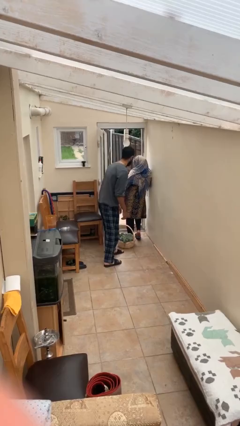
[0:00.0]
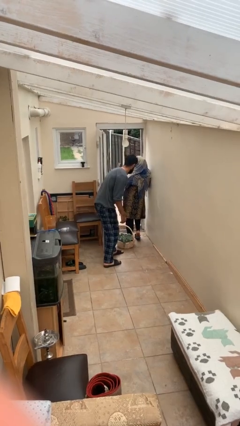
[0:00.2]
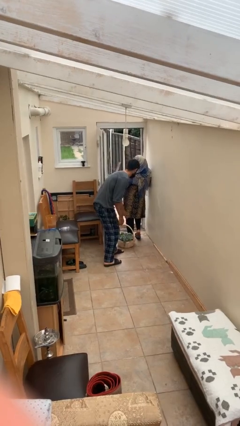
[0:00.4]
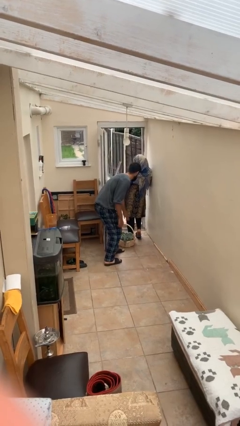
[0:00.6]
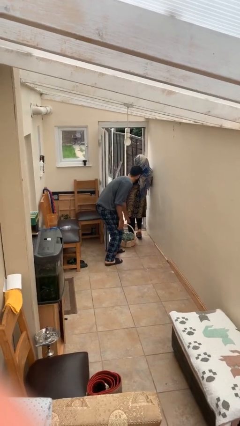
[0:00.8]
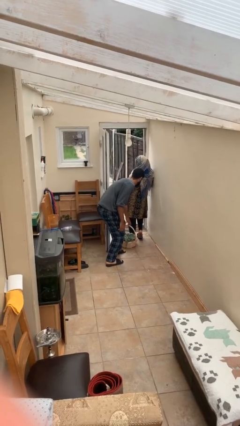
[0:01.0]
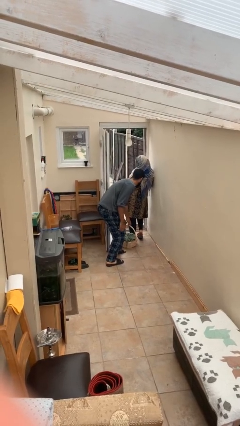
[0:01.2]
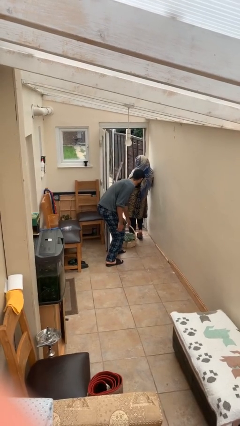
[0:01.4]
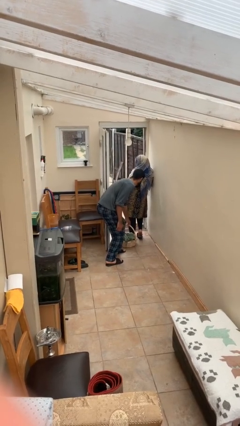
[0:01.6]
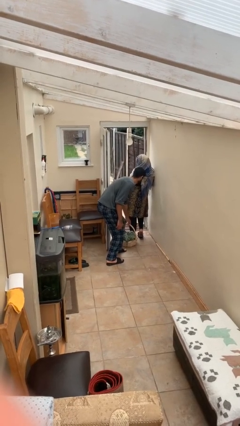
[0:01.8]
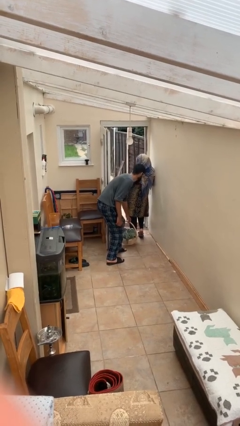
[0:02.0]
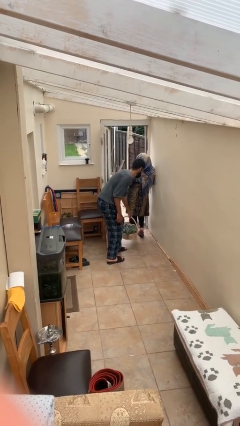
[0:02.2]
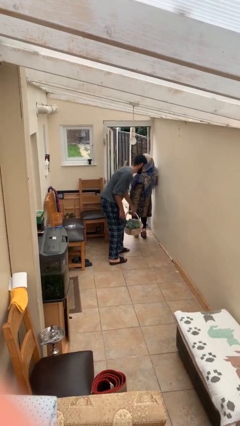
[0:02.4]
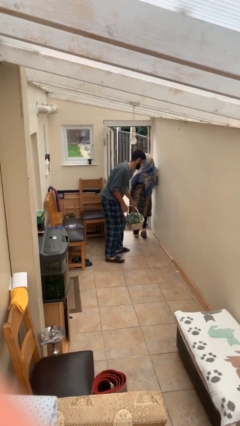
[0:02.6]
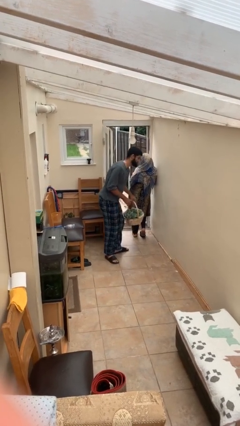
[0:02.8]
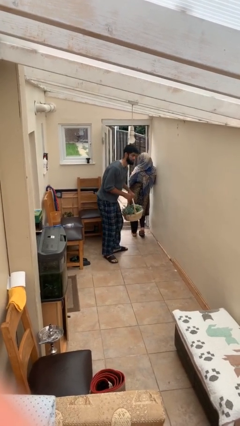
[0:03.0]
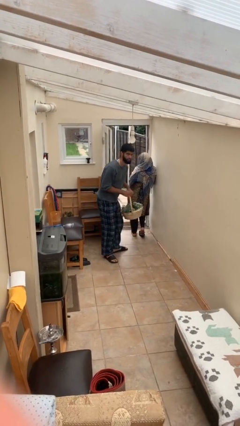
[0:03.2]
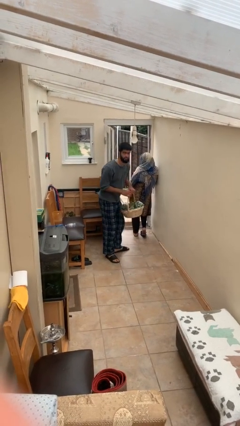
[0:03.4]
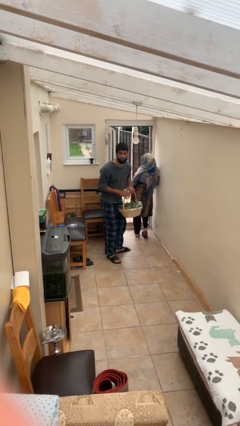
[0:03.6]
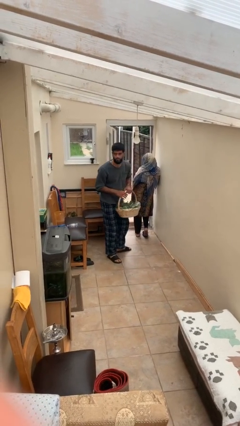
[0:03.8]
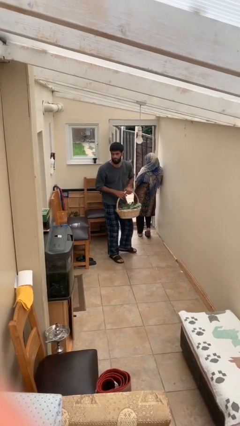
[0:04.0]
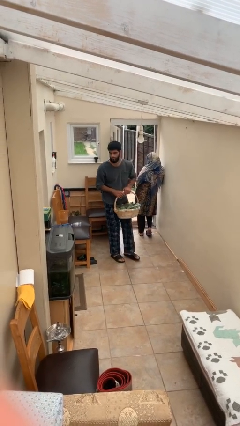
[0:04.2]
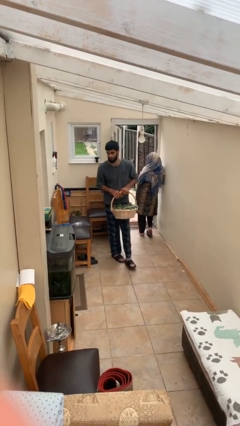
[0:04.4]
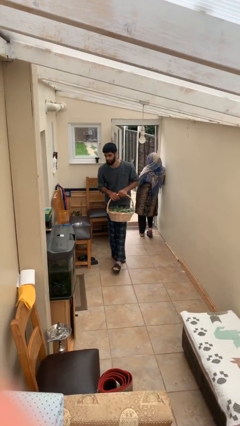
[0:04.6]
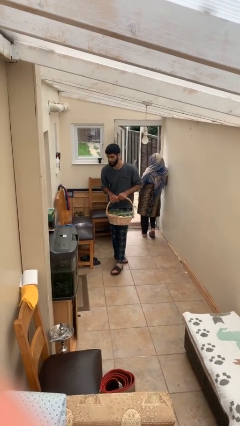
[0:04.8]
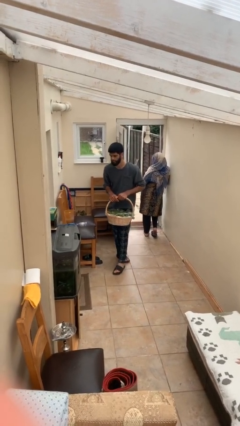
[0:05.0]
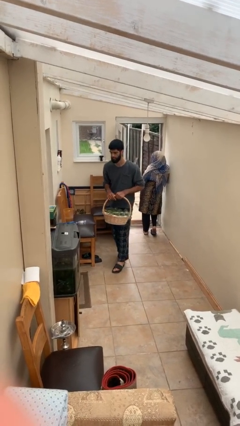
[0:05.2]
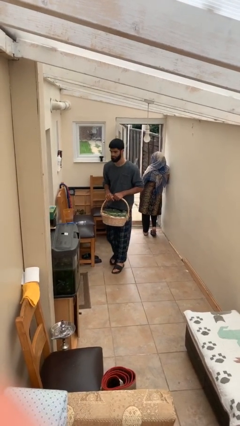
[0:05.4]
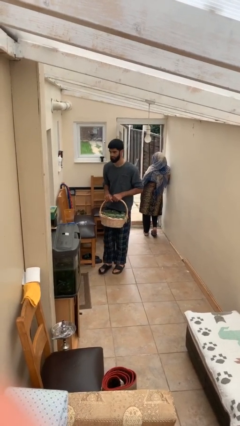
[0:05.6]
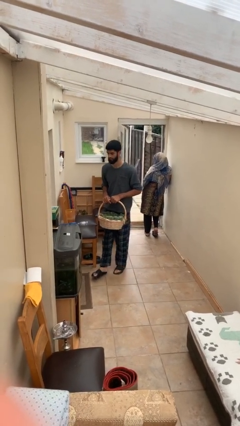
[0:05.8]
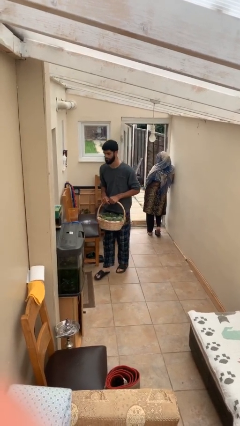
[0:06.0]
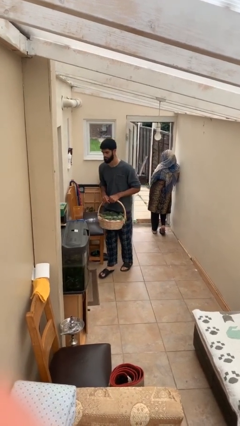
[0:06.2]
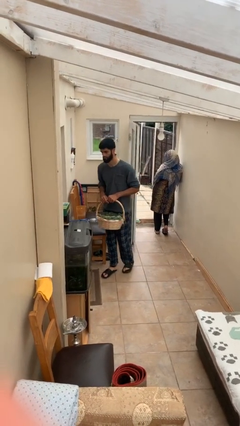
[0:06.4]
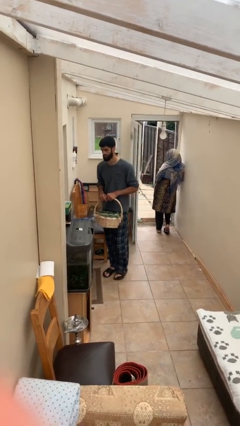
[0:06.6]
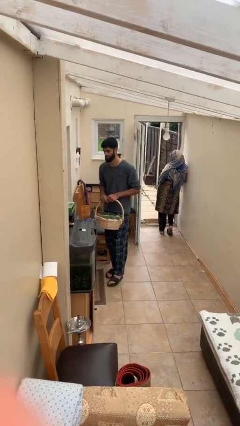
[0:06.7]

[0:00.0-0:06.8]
person steals object from person

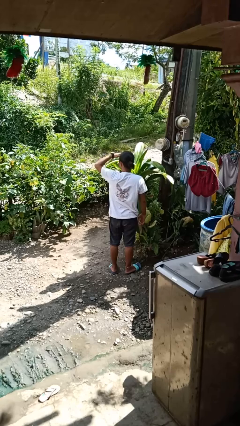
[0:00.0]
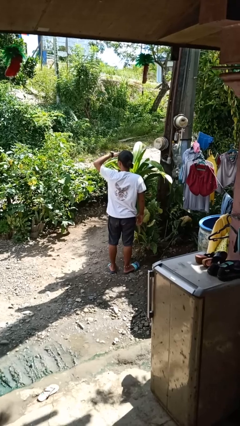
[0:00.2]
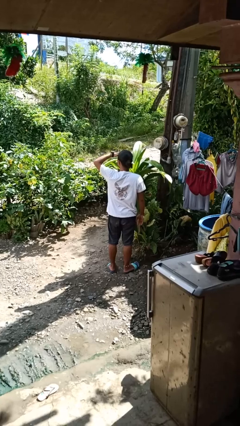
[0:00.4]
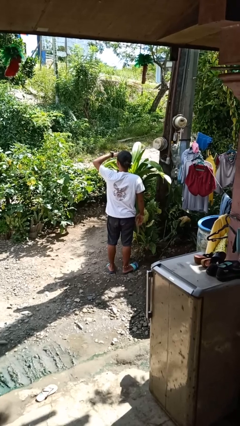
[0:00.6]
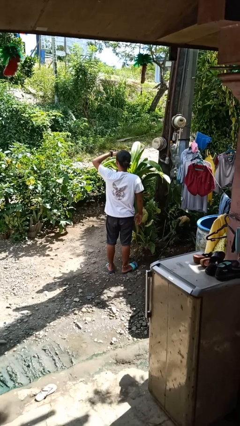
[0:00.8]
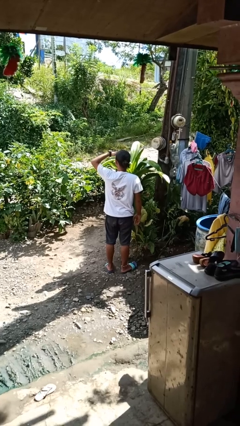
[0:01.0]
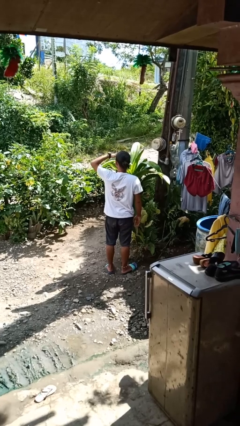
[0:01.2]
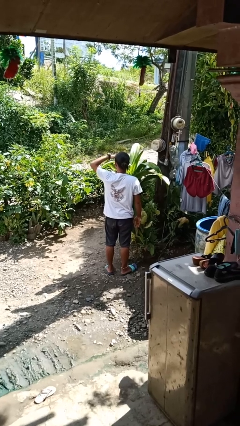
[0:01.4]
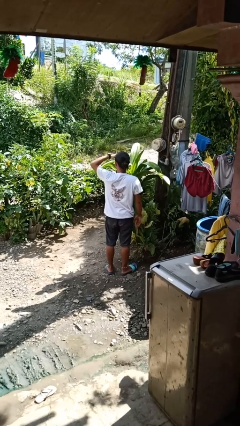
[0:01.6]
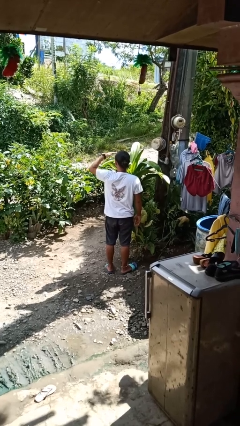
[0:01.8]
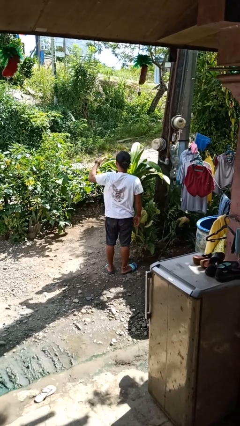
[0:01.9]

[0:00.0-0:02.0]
person shades eyes

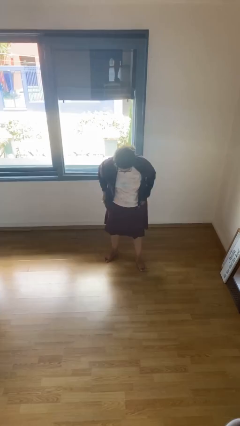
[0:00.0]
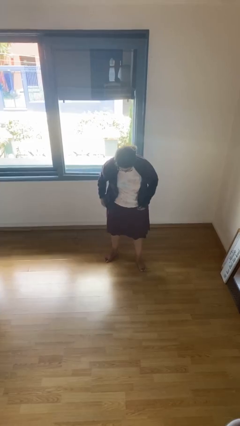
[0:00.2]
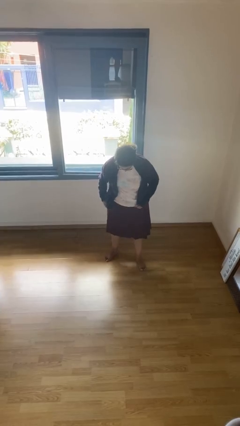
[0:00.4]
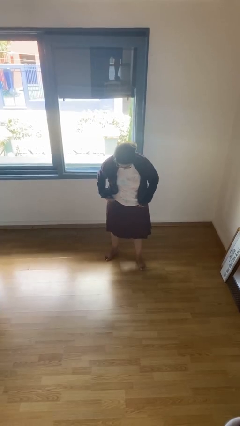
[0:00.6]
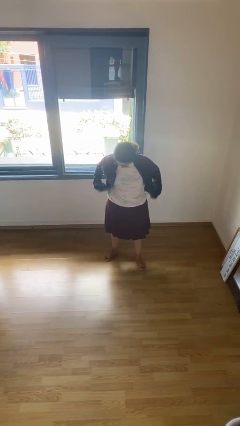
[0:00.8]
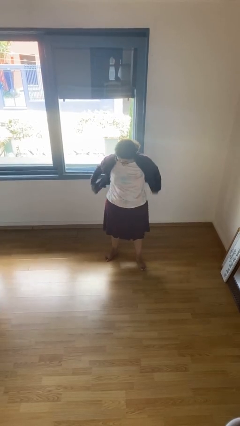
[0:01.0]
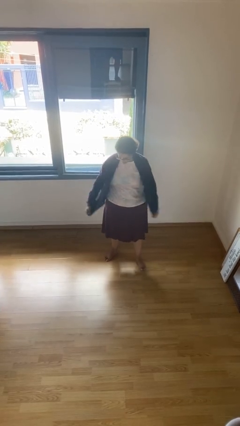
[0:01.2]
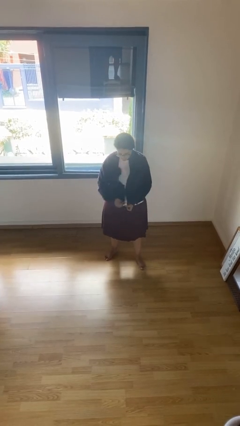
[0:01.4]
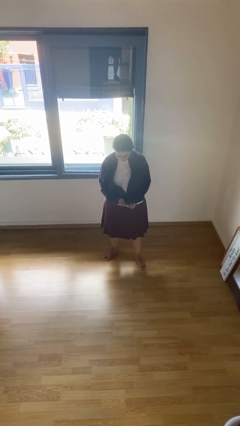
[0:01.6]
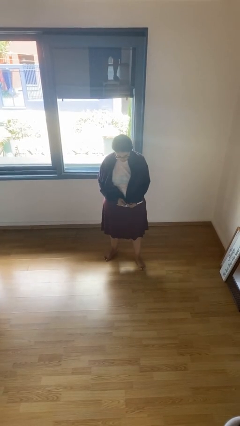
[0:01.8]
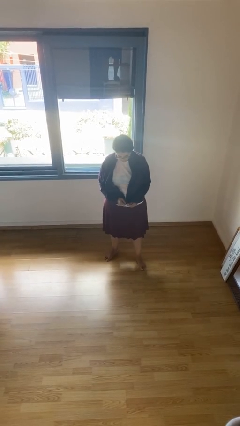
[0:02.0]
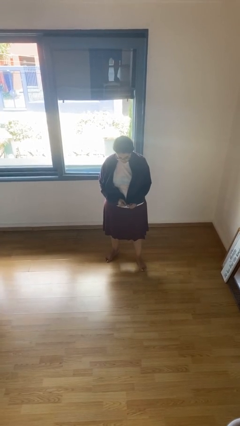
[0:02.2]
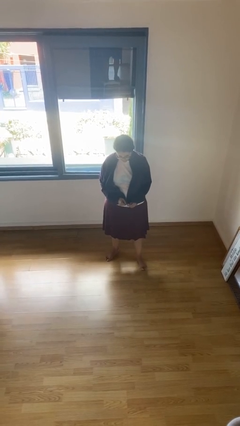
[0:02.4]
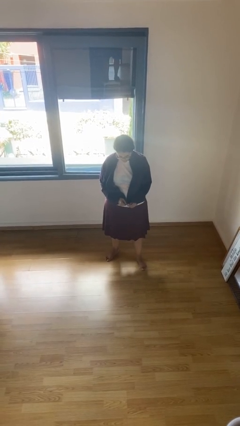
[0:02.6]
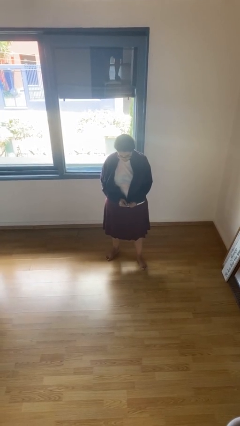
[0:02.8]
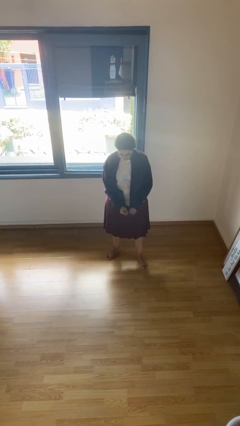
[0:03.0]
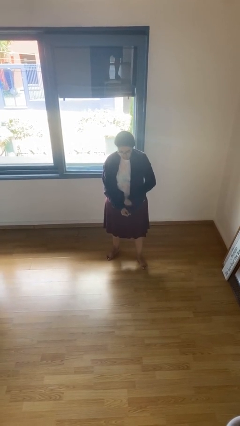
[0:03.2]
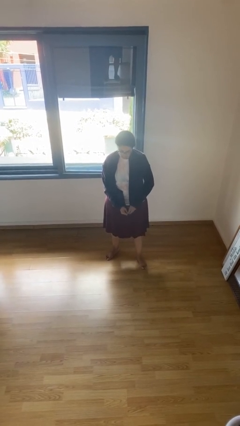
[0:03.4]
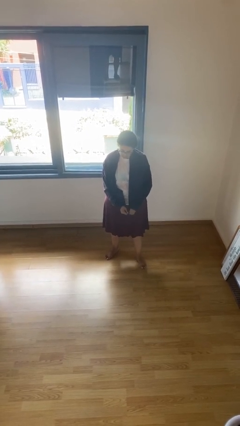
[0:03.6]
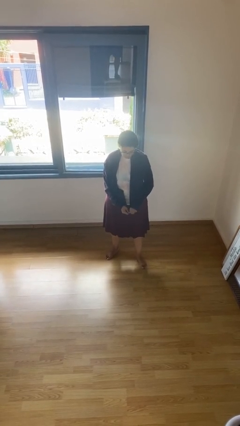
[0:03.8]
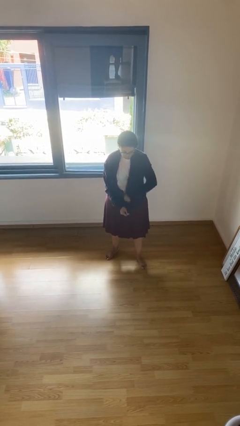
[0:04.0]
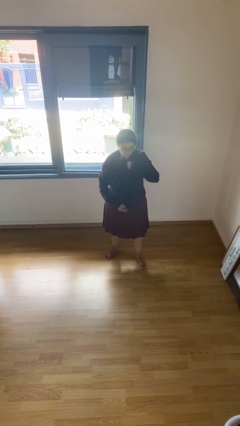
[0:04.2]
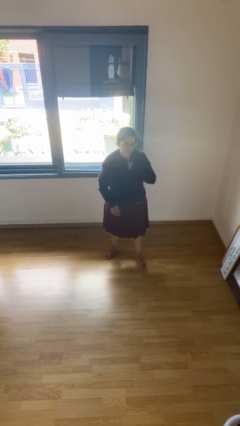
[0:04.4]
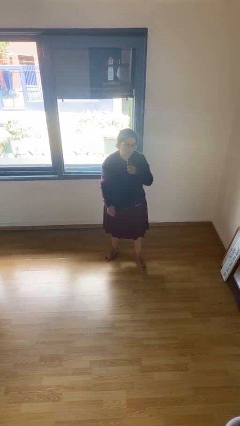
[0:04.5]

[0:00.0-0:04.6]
person zips up jacket

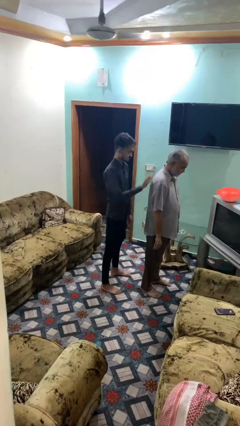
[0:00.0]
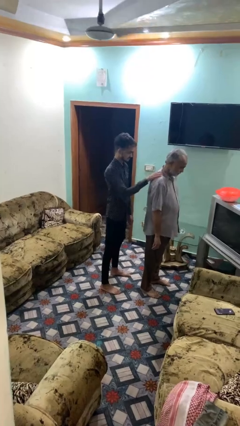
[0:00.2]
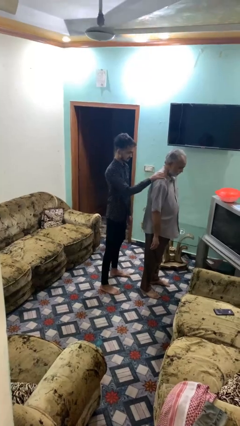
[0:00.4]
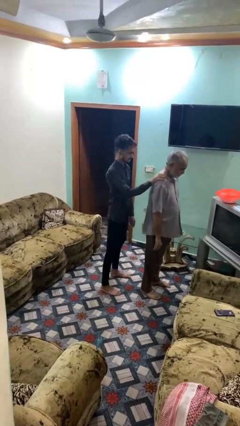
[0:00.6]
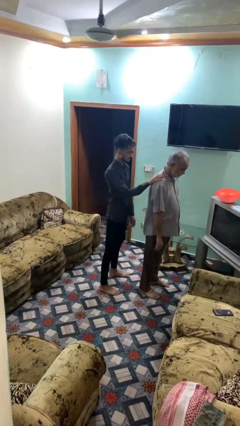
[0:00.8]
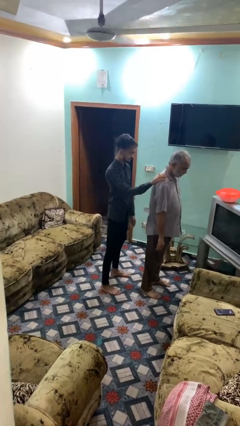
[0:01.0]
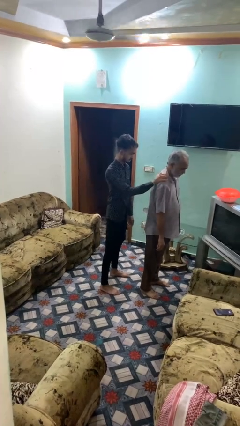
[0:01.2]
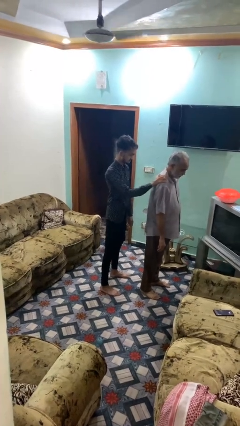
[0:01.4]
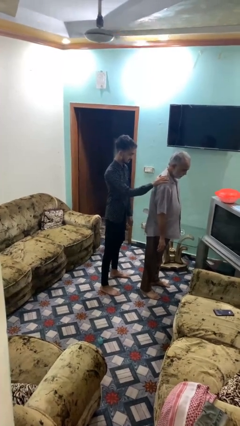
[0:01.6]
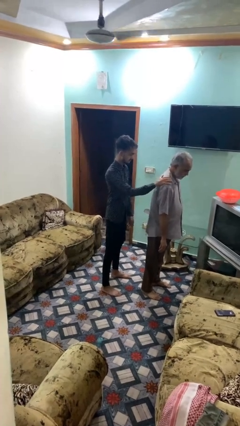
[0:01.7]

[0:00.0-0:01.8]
person grabs person by shoulder

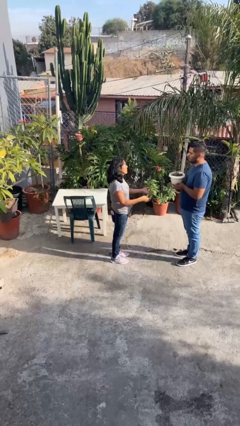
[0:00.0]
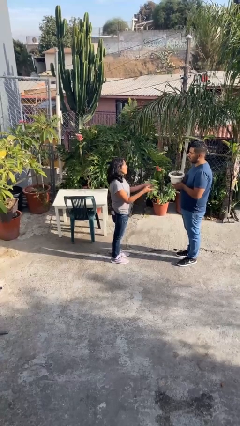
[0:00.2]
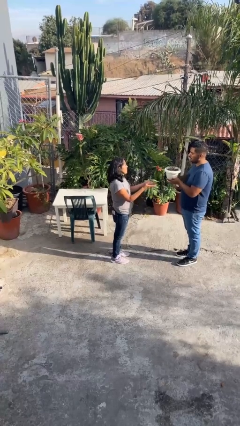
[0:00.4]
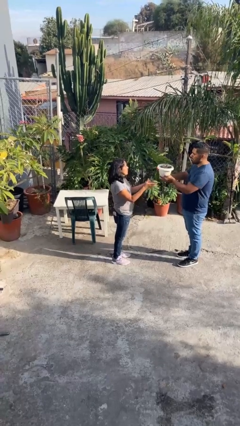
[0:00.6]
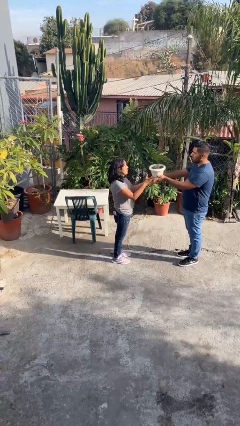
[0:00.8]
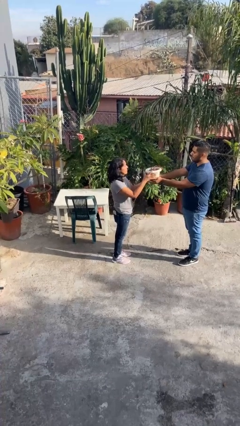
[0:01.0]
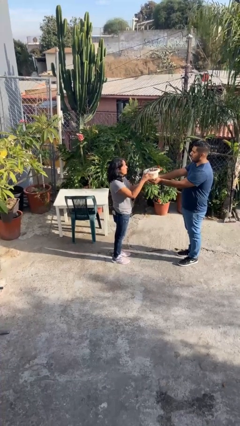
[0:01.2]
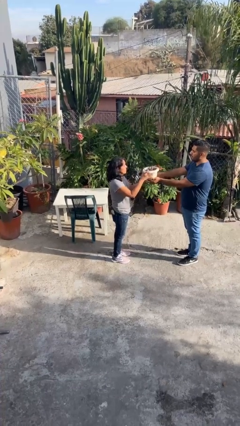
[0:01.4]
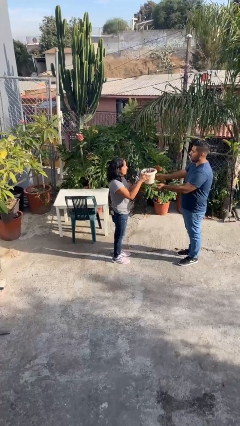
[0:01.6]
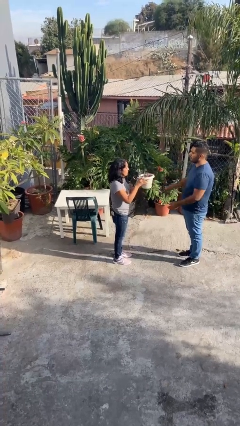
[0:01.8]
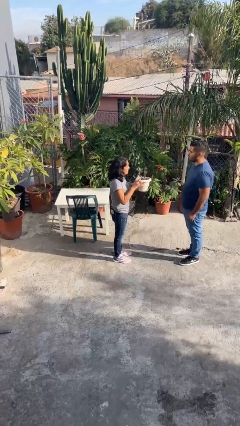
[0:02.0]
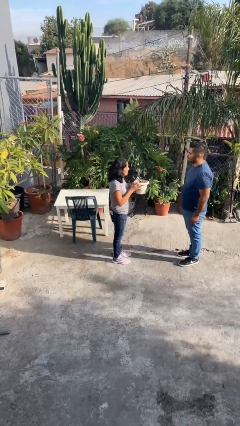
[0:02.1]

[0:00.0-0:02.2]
person transfers object to person
